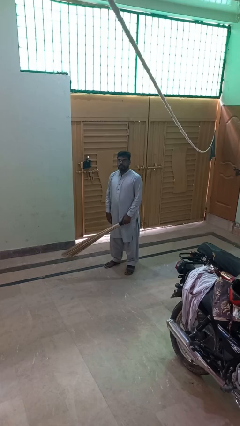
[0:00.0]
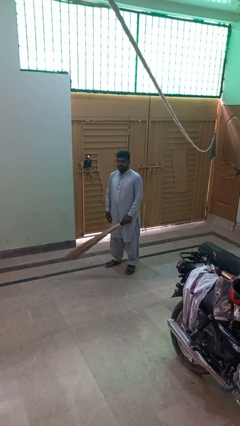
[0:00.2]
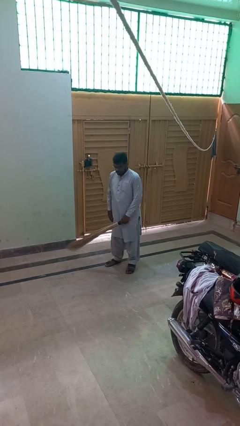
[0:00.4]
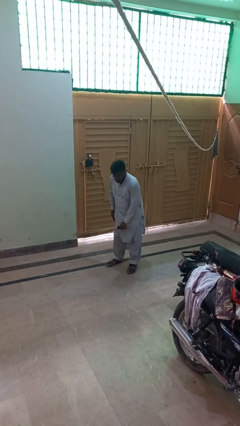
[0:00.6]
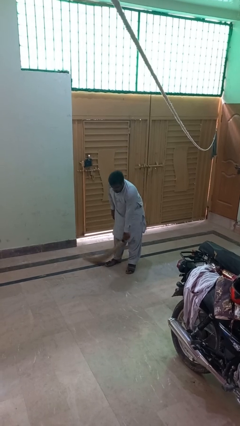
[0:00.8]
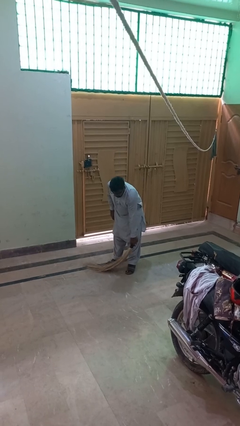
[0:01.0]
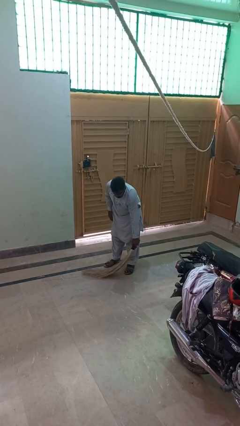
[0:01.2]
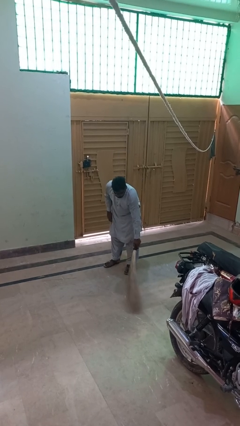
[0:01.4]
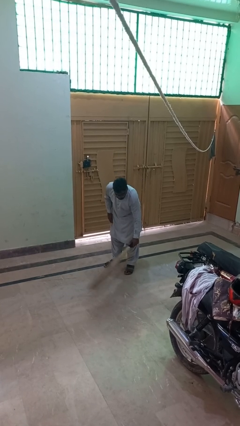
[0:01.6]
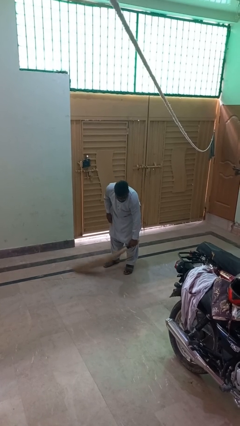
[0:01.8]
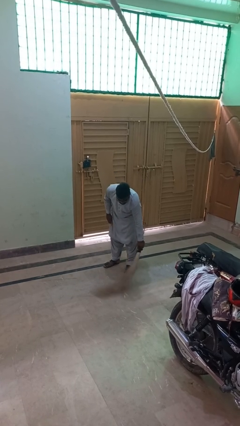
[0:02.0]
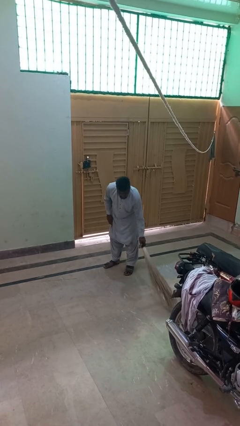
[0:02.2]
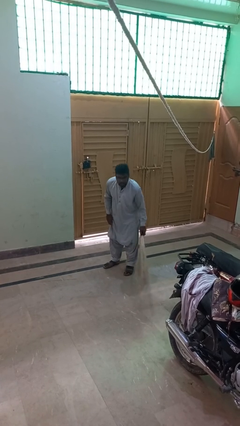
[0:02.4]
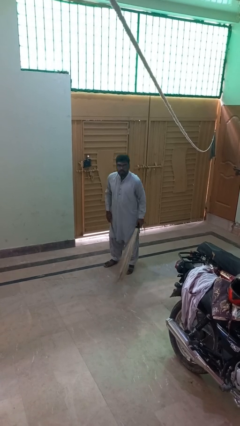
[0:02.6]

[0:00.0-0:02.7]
person sweeps floor

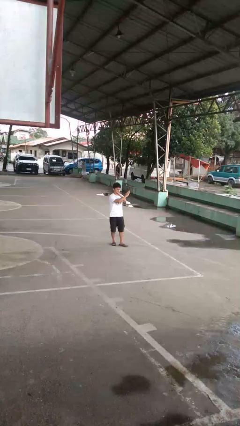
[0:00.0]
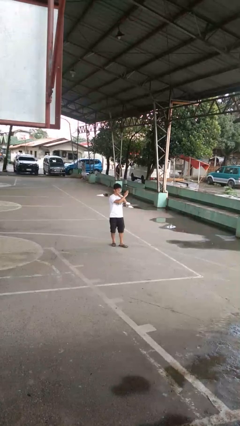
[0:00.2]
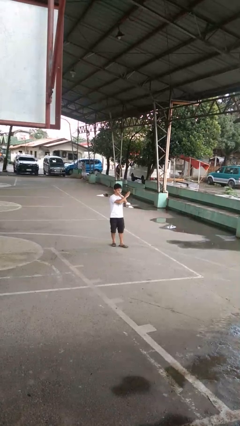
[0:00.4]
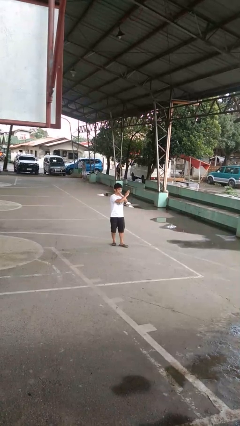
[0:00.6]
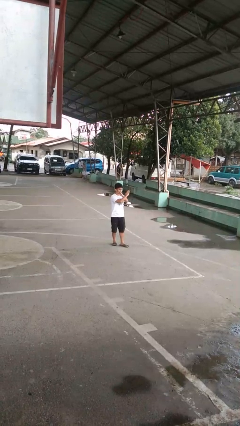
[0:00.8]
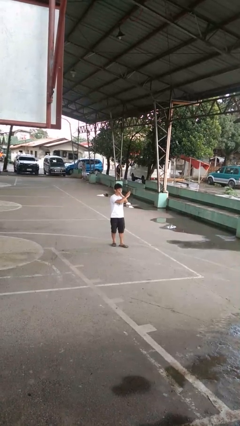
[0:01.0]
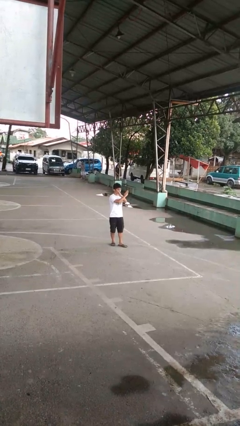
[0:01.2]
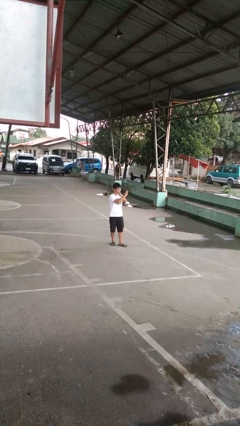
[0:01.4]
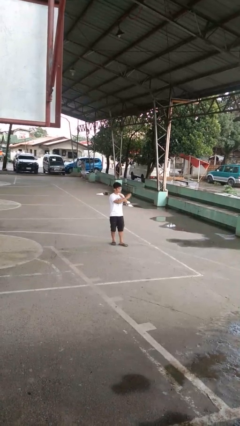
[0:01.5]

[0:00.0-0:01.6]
person gestures arms x

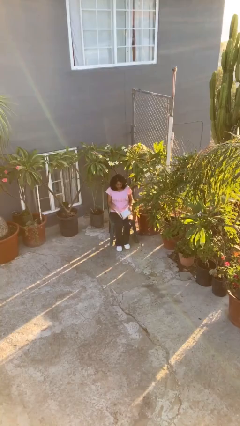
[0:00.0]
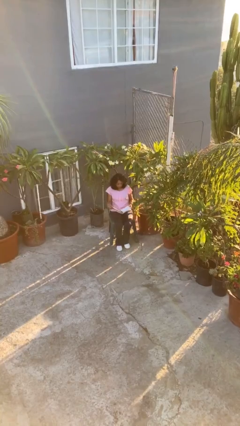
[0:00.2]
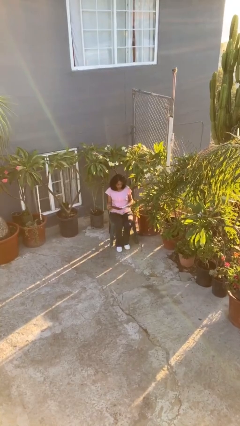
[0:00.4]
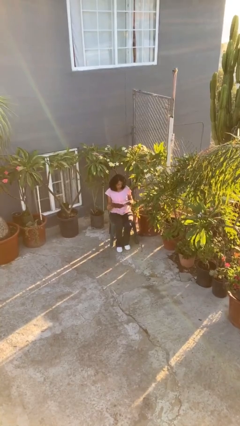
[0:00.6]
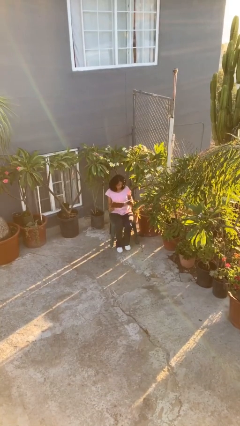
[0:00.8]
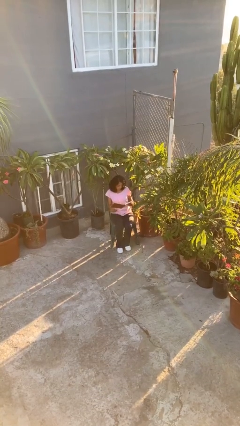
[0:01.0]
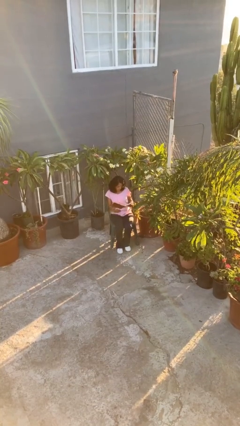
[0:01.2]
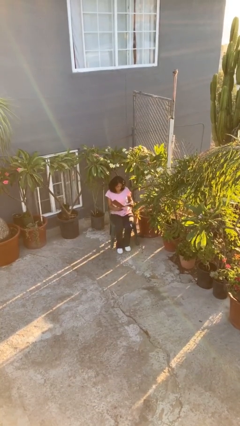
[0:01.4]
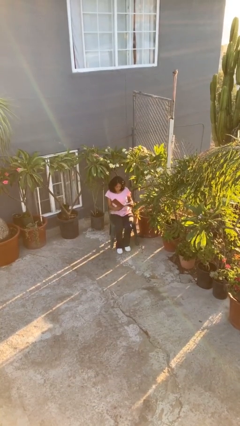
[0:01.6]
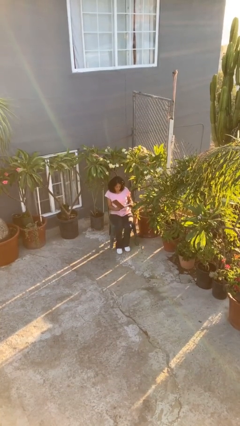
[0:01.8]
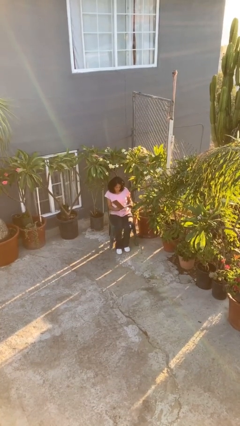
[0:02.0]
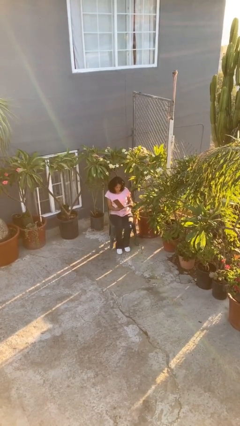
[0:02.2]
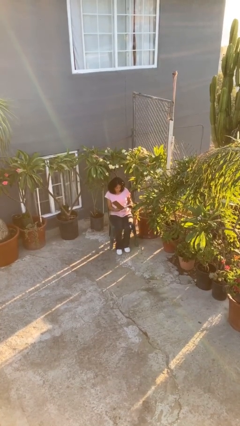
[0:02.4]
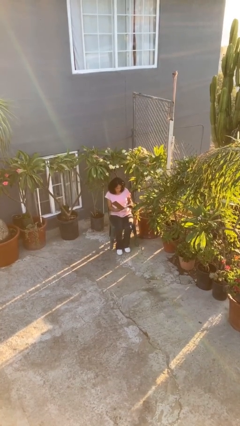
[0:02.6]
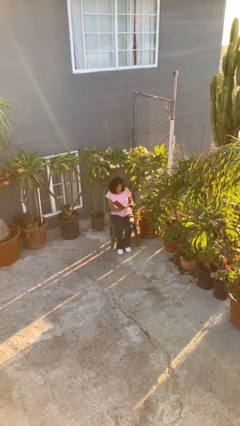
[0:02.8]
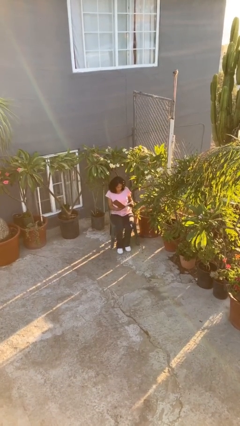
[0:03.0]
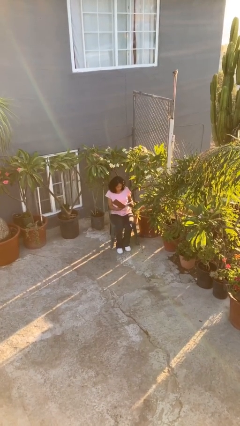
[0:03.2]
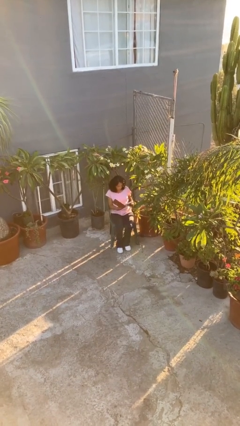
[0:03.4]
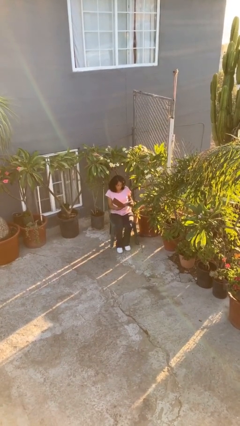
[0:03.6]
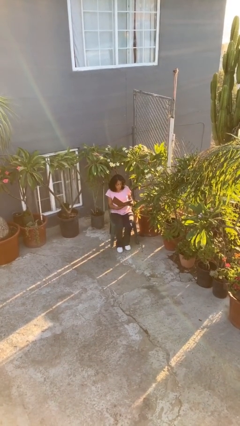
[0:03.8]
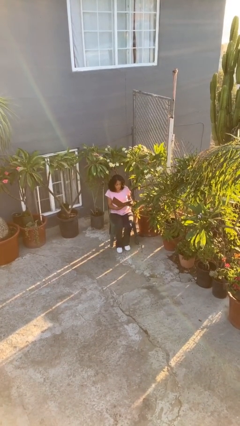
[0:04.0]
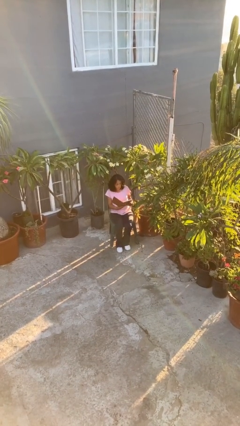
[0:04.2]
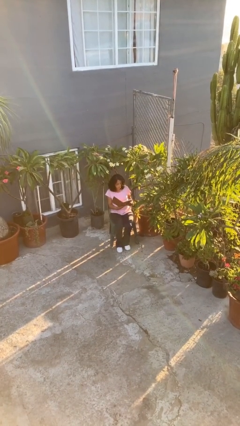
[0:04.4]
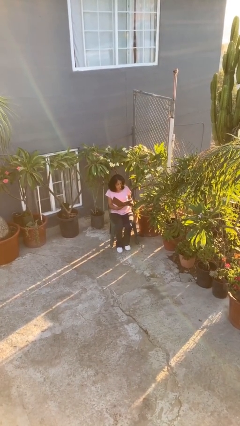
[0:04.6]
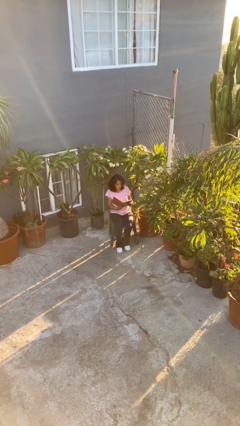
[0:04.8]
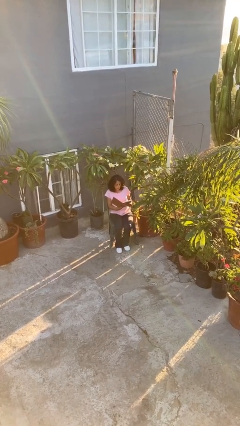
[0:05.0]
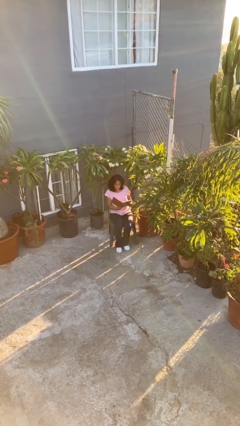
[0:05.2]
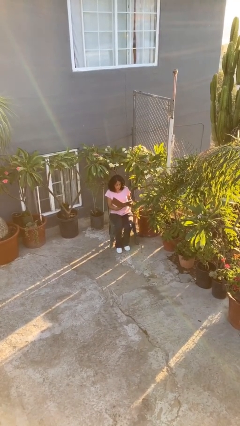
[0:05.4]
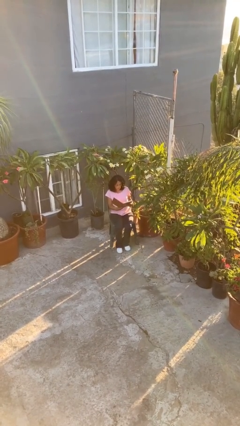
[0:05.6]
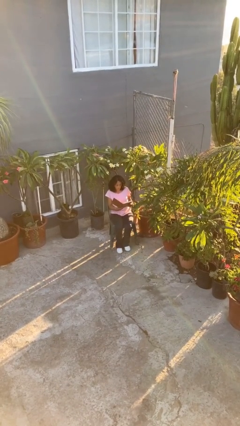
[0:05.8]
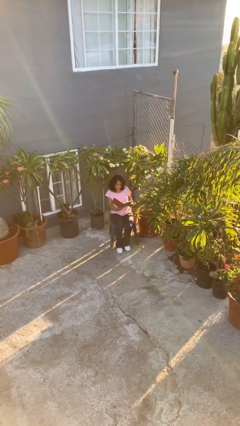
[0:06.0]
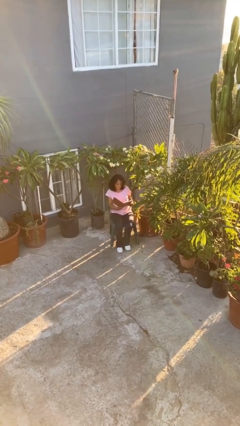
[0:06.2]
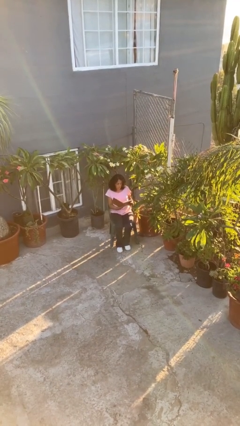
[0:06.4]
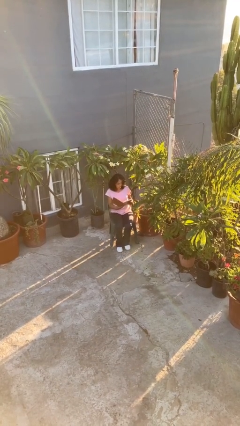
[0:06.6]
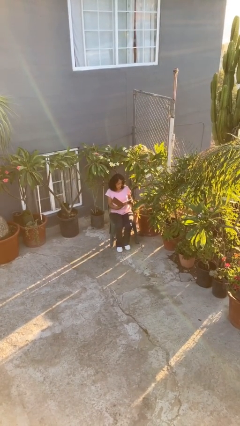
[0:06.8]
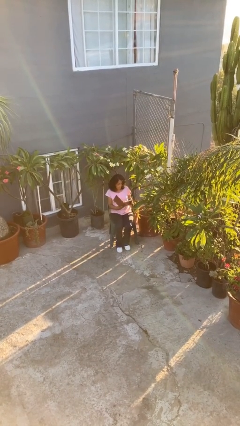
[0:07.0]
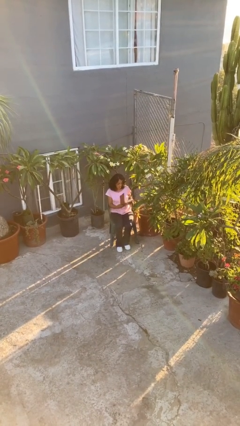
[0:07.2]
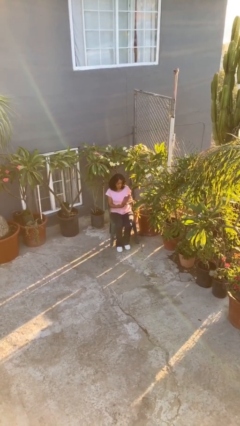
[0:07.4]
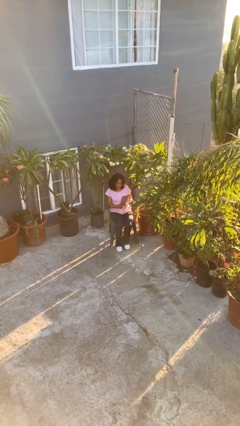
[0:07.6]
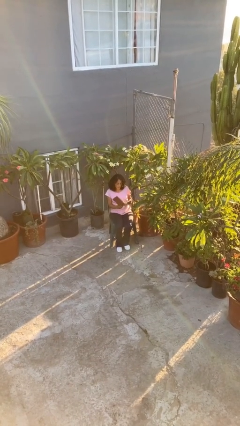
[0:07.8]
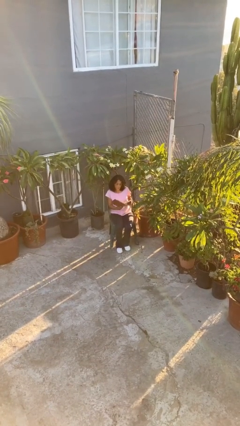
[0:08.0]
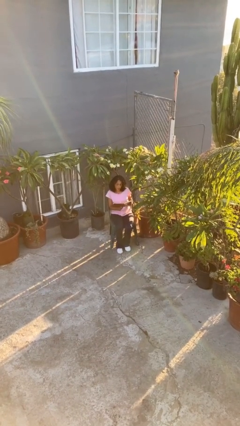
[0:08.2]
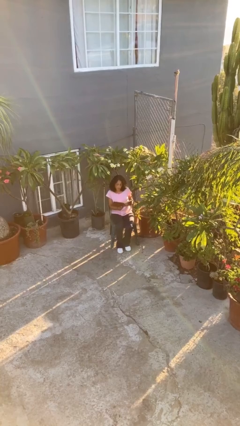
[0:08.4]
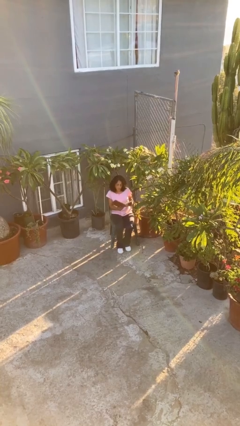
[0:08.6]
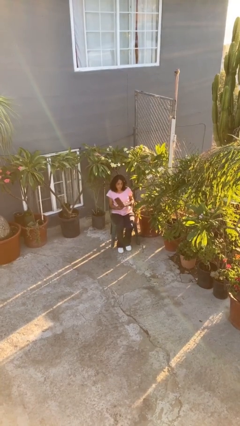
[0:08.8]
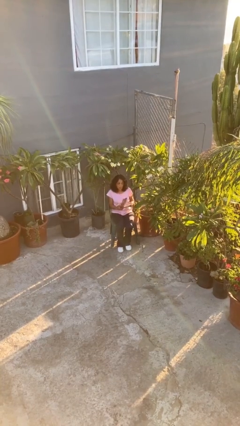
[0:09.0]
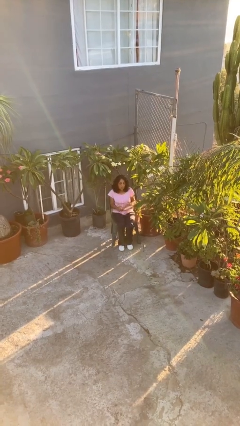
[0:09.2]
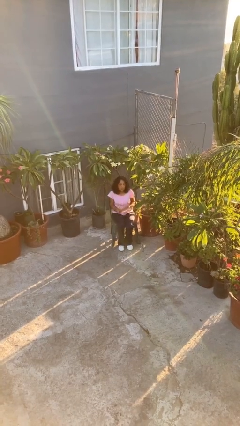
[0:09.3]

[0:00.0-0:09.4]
person reads document

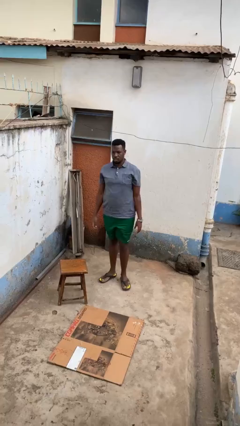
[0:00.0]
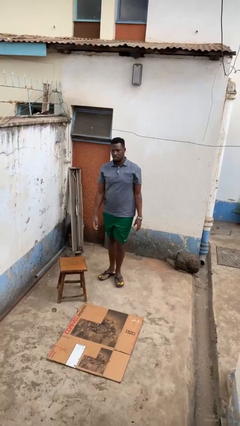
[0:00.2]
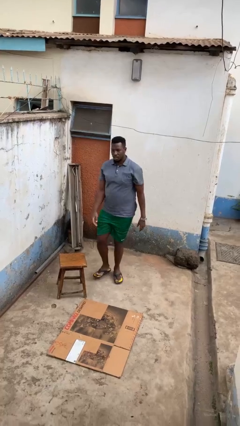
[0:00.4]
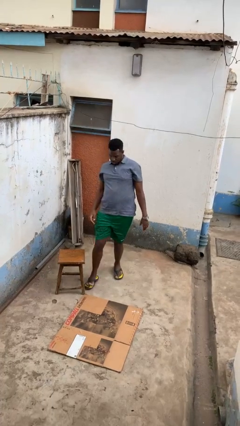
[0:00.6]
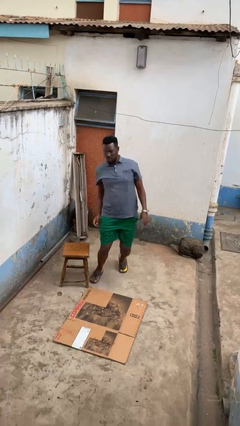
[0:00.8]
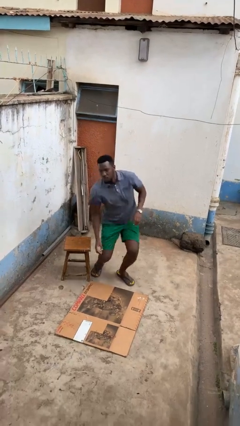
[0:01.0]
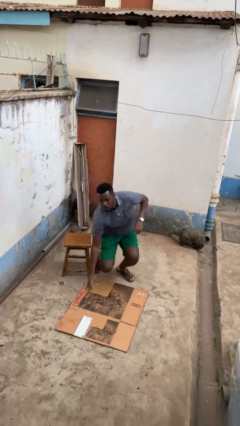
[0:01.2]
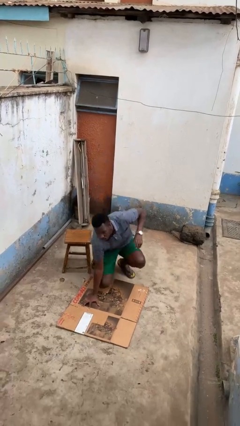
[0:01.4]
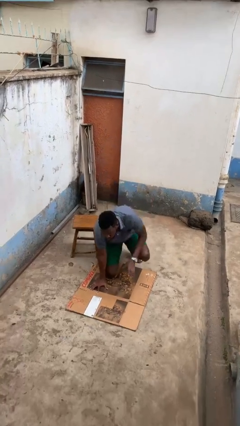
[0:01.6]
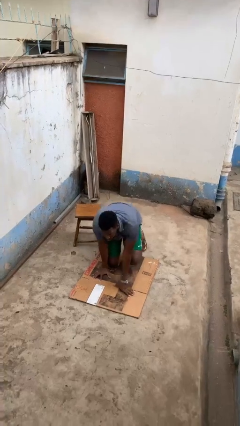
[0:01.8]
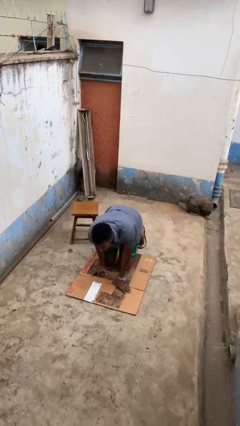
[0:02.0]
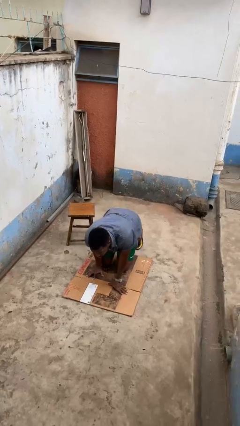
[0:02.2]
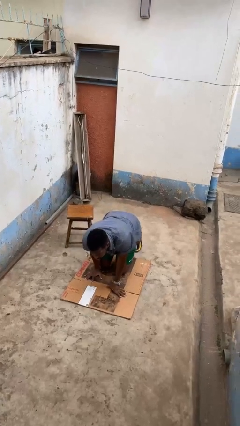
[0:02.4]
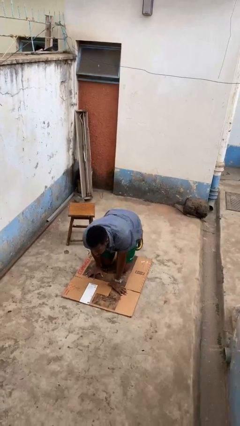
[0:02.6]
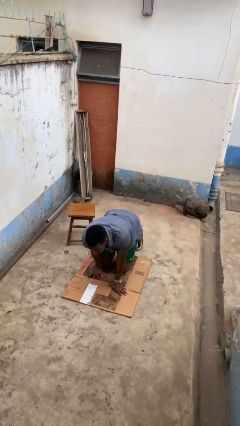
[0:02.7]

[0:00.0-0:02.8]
person trips on object on floor

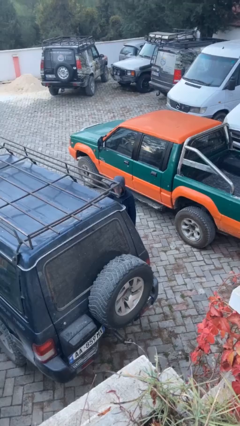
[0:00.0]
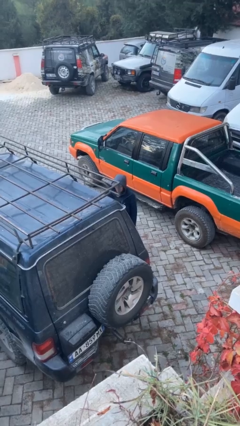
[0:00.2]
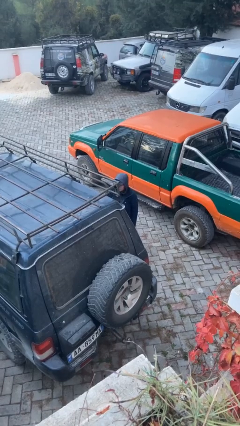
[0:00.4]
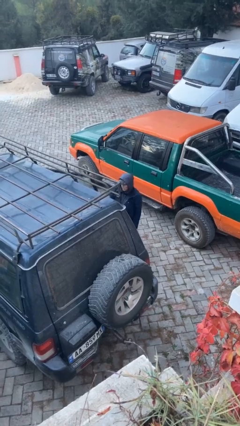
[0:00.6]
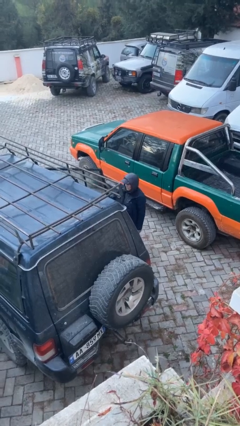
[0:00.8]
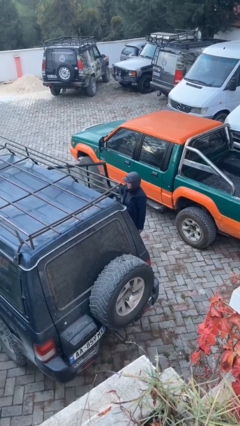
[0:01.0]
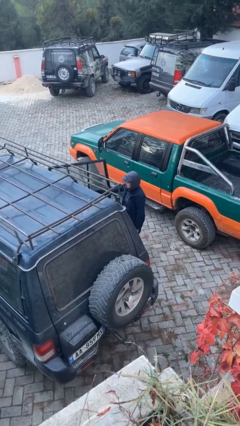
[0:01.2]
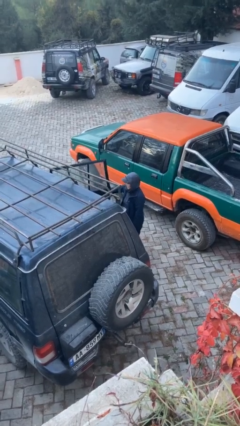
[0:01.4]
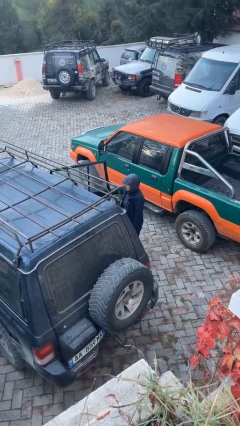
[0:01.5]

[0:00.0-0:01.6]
person opens car door
